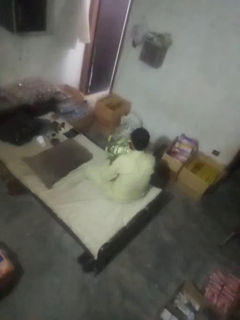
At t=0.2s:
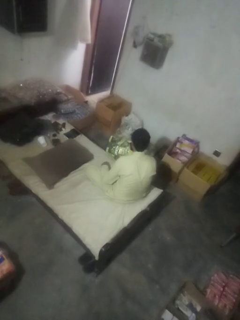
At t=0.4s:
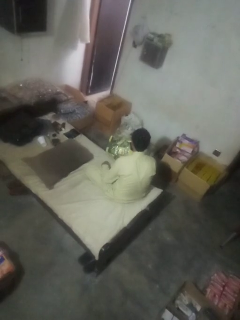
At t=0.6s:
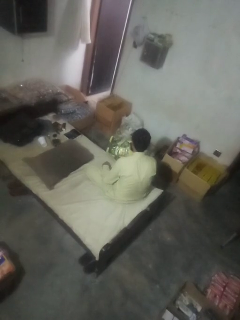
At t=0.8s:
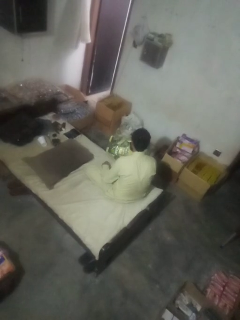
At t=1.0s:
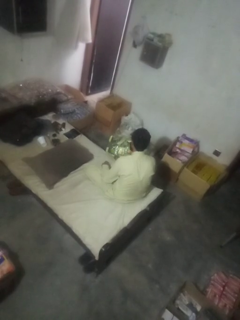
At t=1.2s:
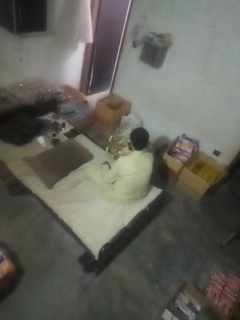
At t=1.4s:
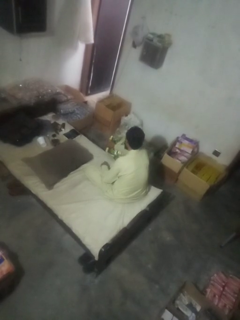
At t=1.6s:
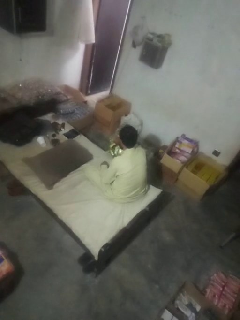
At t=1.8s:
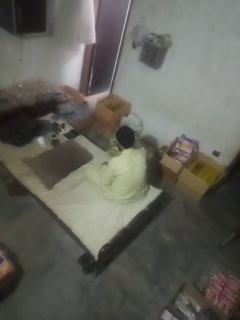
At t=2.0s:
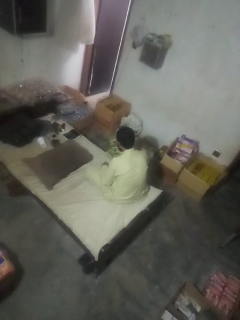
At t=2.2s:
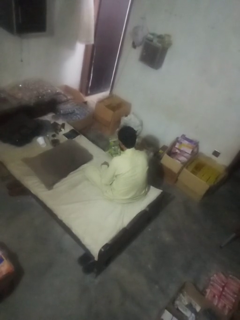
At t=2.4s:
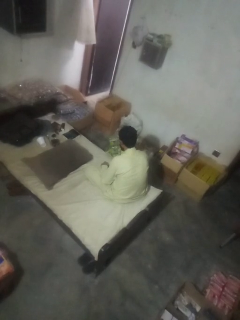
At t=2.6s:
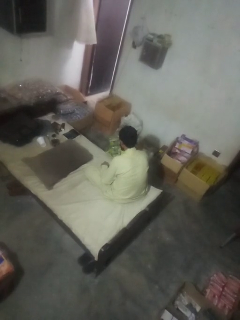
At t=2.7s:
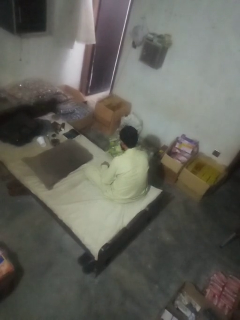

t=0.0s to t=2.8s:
person searches in box

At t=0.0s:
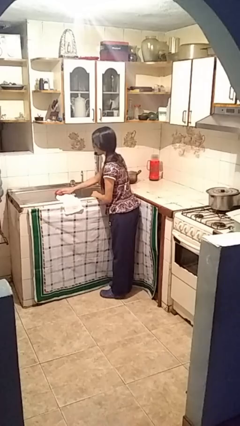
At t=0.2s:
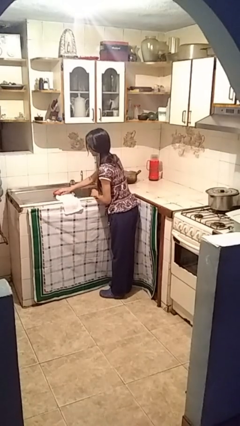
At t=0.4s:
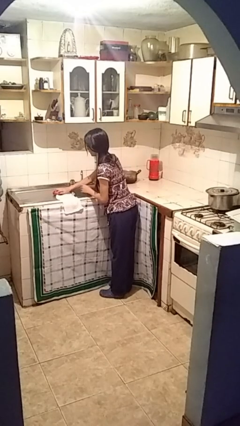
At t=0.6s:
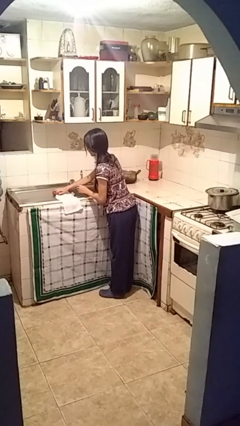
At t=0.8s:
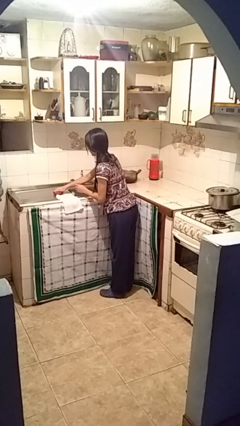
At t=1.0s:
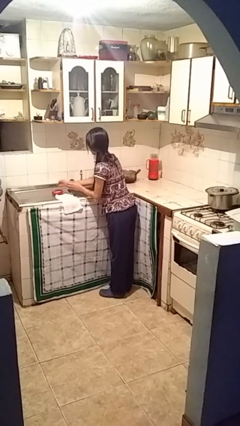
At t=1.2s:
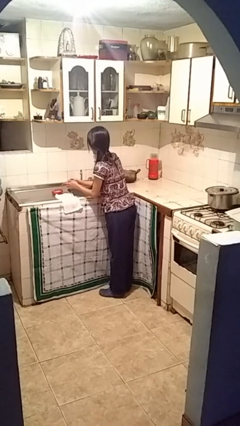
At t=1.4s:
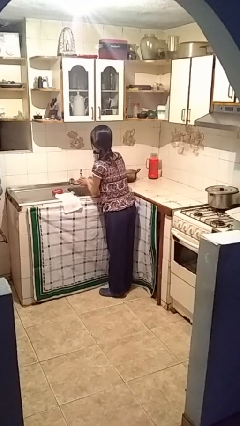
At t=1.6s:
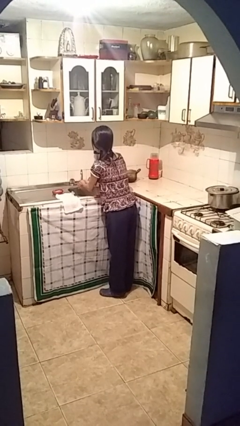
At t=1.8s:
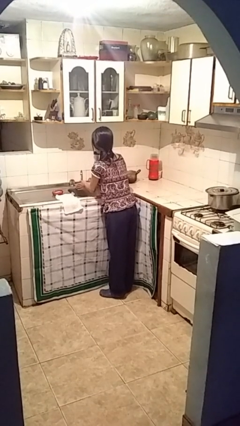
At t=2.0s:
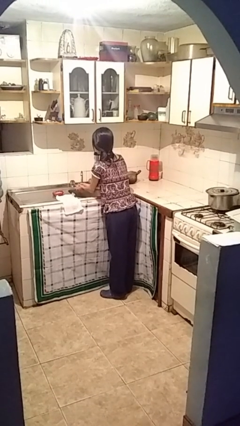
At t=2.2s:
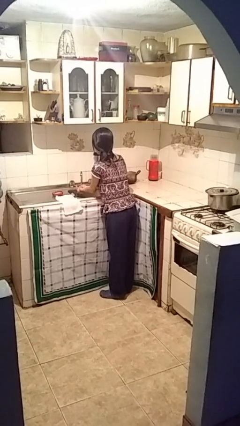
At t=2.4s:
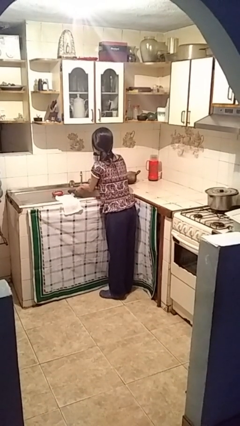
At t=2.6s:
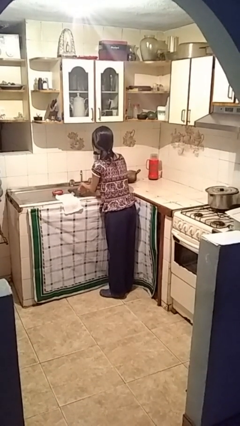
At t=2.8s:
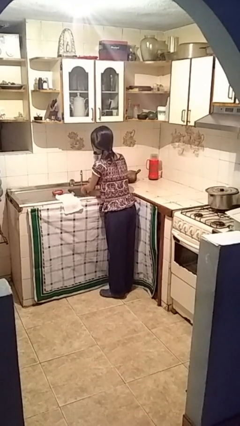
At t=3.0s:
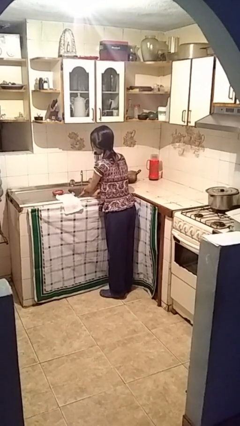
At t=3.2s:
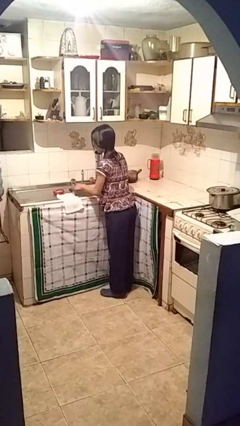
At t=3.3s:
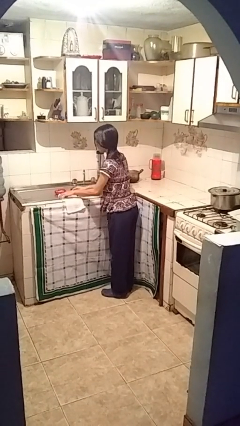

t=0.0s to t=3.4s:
person washes hands

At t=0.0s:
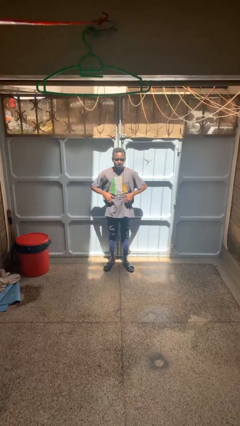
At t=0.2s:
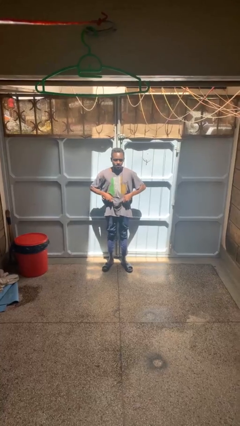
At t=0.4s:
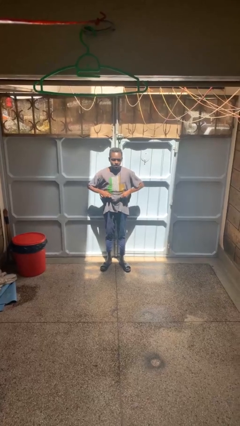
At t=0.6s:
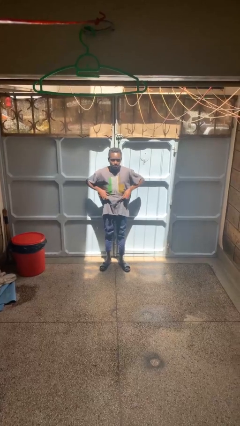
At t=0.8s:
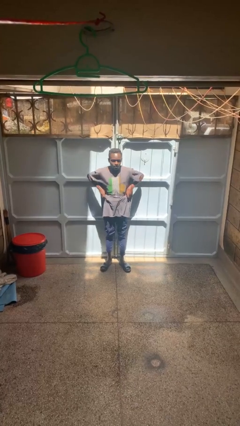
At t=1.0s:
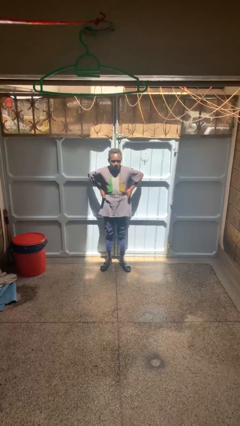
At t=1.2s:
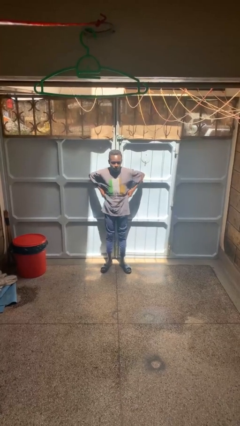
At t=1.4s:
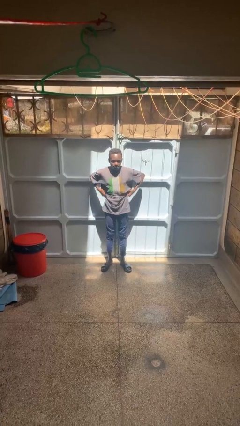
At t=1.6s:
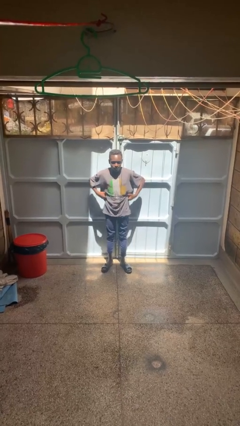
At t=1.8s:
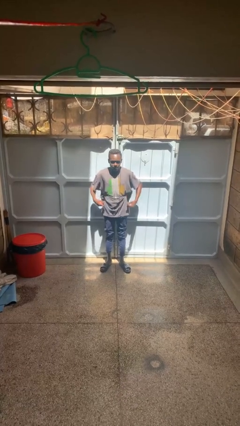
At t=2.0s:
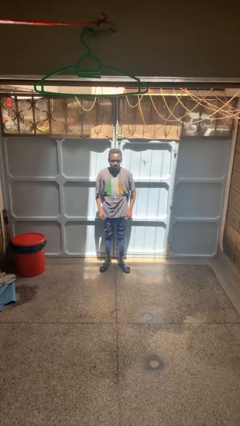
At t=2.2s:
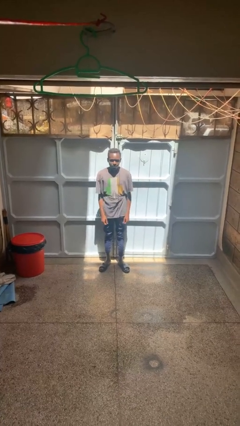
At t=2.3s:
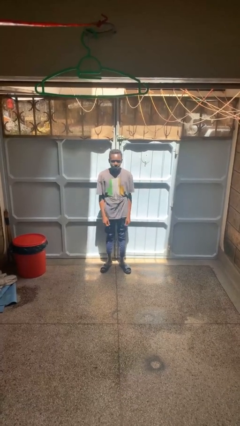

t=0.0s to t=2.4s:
person hikes up pants

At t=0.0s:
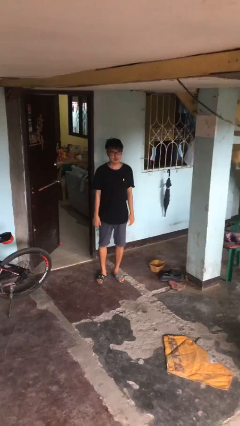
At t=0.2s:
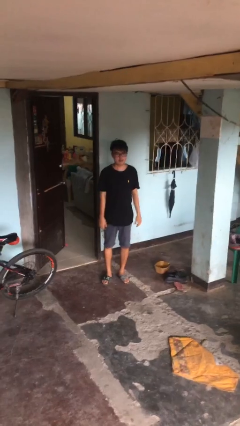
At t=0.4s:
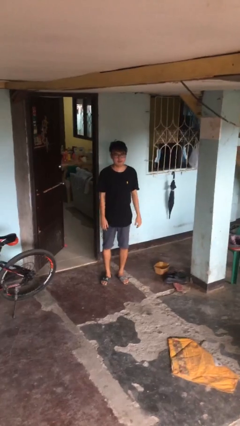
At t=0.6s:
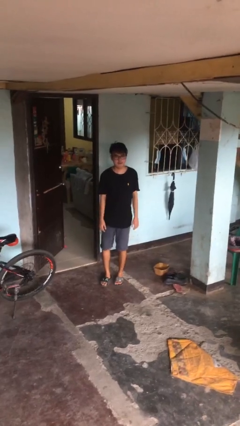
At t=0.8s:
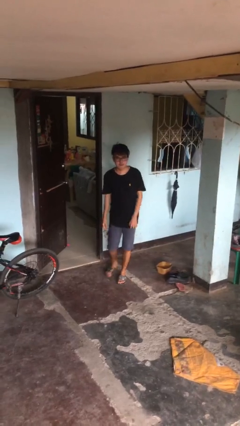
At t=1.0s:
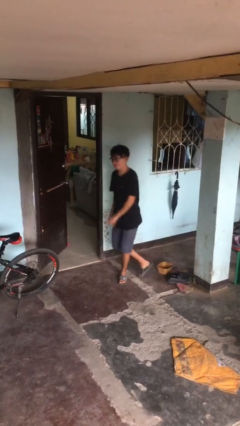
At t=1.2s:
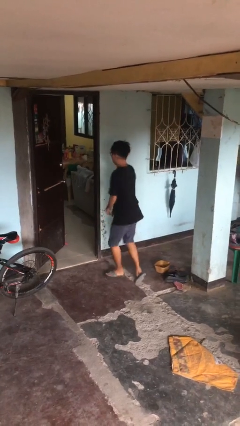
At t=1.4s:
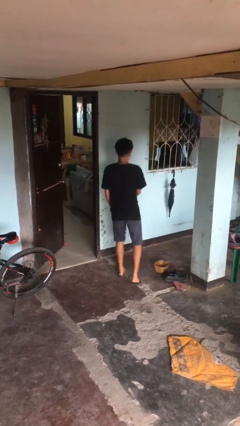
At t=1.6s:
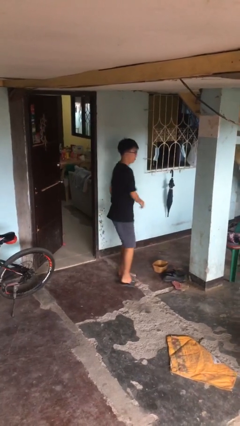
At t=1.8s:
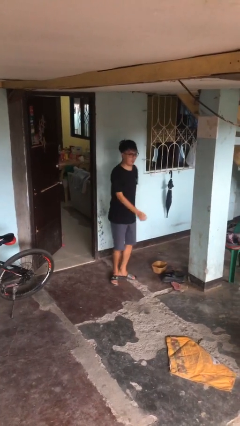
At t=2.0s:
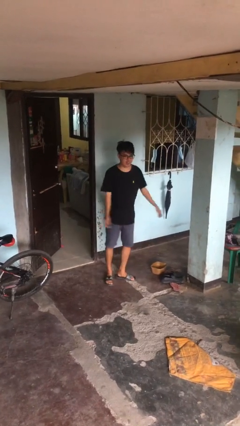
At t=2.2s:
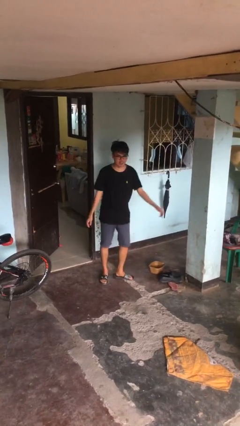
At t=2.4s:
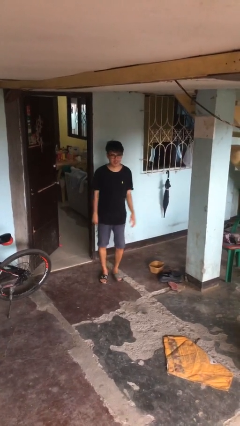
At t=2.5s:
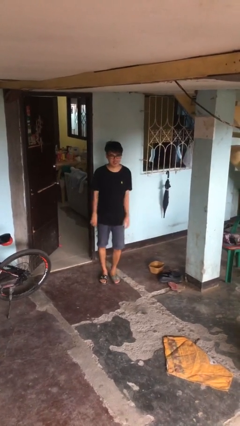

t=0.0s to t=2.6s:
person twirls

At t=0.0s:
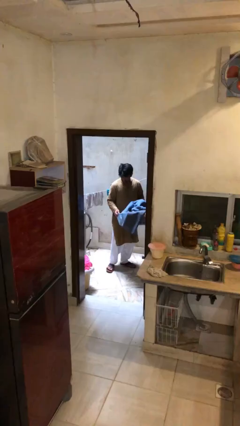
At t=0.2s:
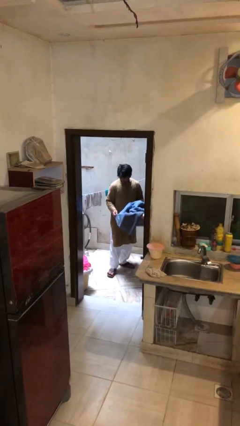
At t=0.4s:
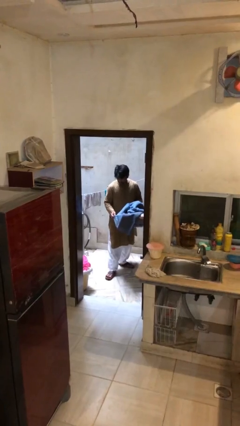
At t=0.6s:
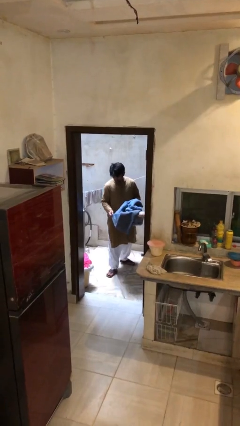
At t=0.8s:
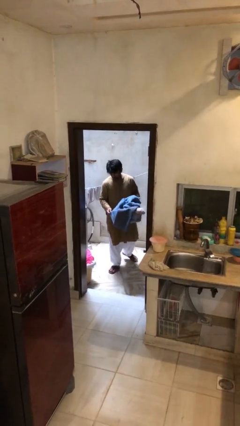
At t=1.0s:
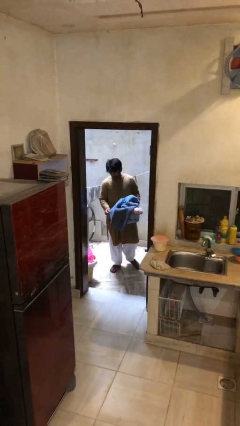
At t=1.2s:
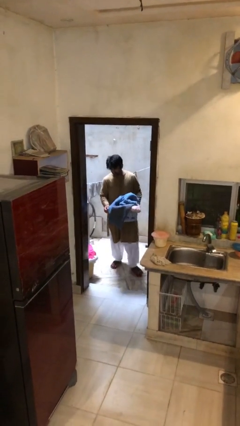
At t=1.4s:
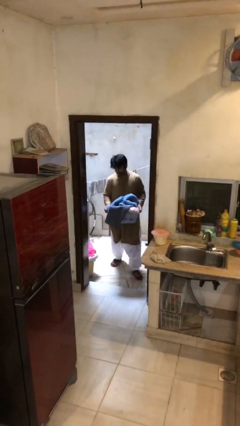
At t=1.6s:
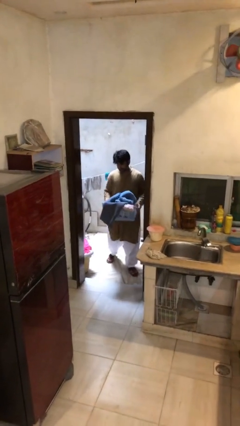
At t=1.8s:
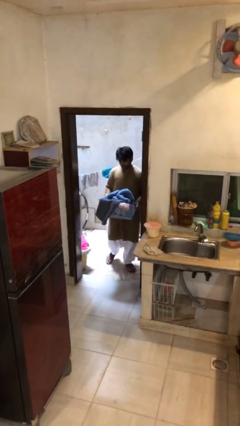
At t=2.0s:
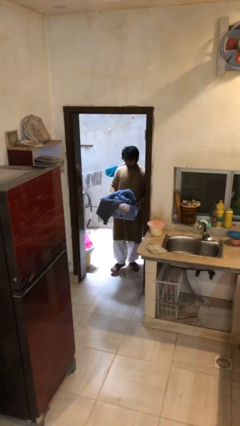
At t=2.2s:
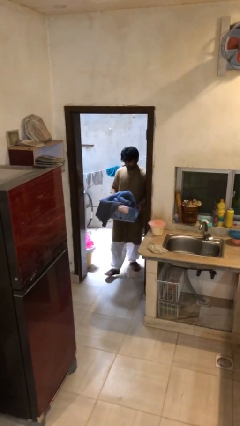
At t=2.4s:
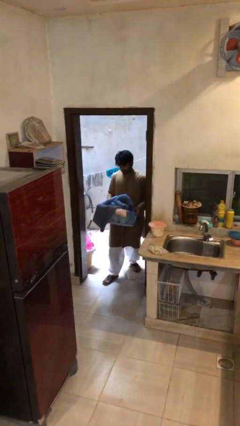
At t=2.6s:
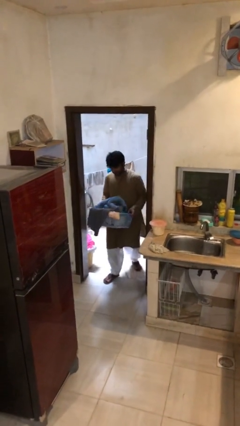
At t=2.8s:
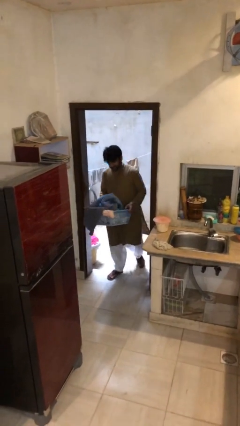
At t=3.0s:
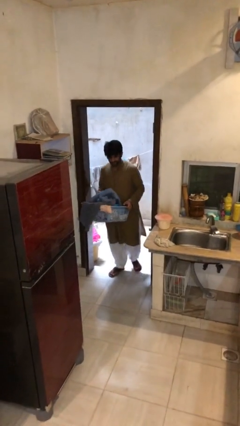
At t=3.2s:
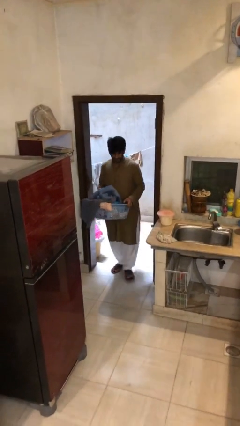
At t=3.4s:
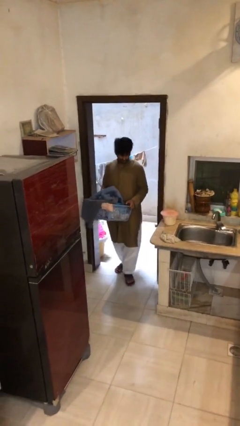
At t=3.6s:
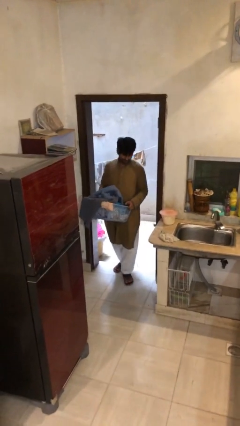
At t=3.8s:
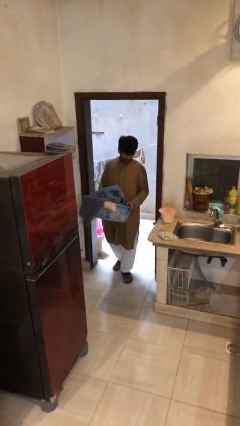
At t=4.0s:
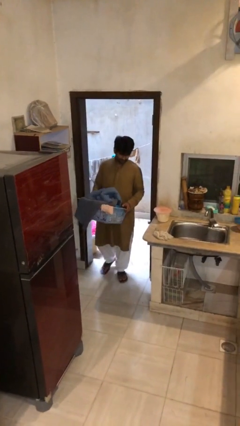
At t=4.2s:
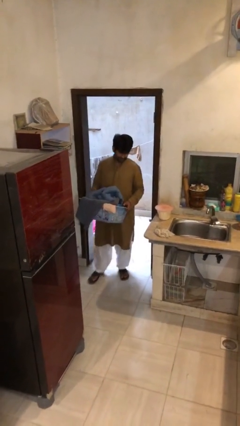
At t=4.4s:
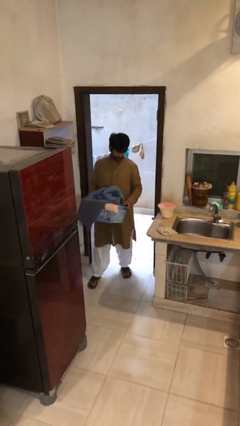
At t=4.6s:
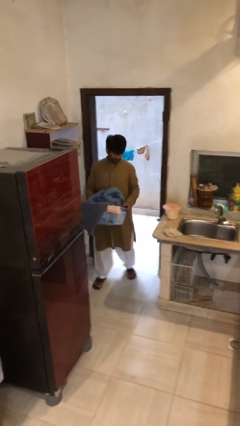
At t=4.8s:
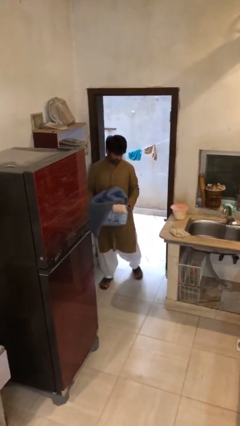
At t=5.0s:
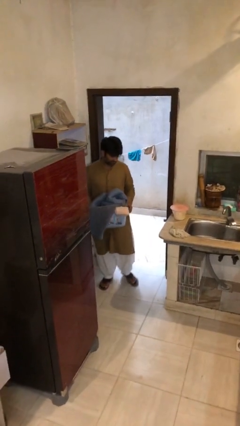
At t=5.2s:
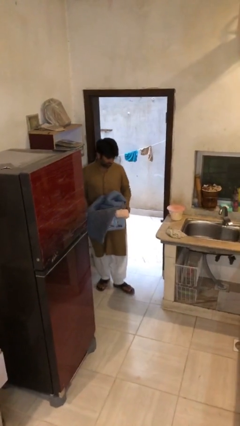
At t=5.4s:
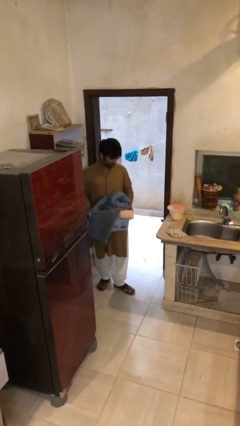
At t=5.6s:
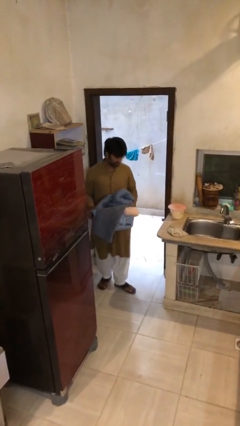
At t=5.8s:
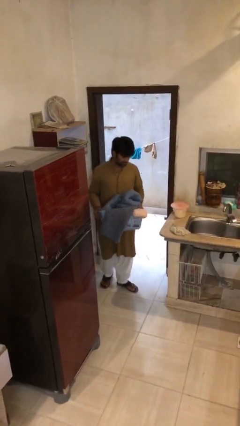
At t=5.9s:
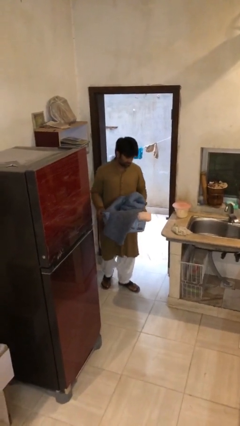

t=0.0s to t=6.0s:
person carries heavy object

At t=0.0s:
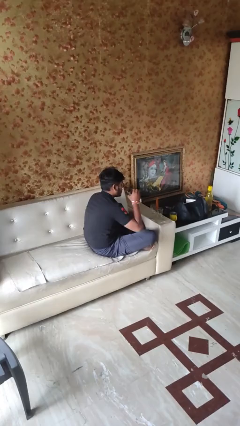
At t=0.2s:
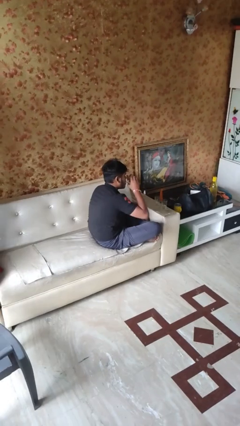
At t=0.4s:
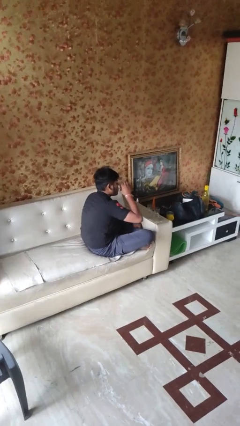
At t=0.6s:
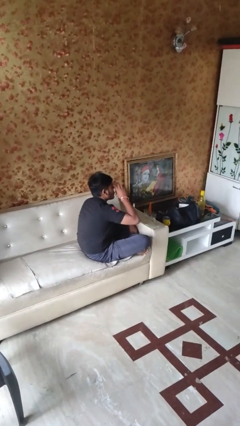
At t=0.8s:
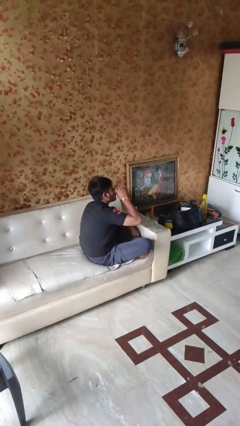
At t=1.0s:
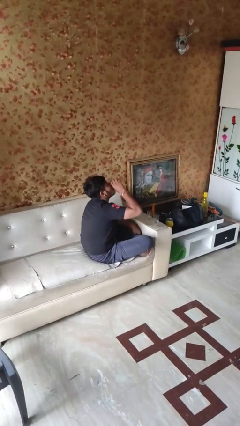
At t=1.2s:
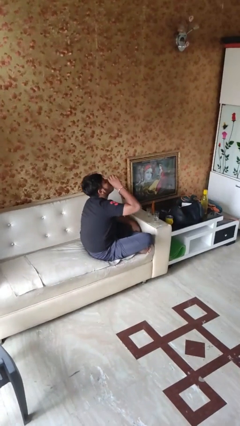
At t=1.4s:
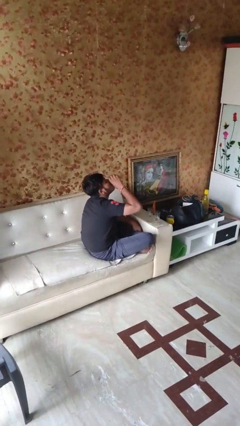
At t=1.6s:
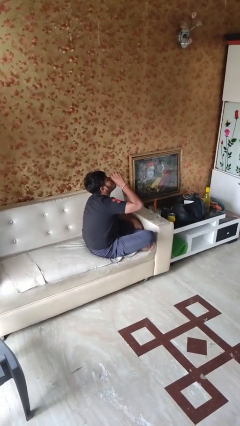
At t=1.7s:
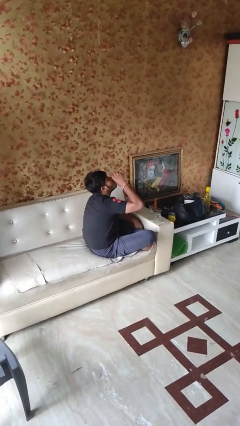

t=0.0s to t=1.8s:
person drinks from shotglass
